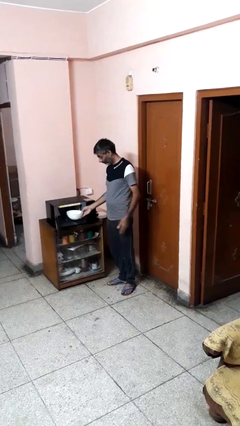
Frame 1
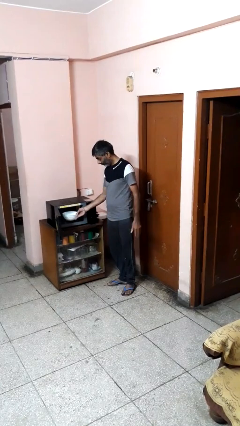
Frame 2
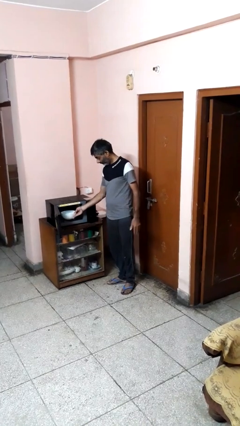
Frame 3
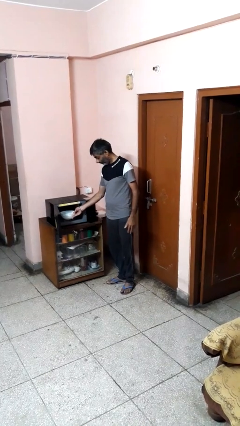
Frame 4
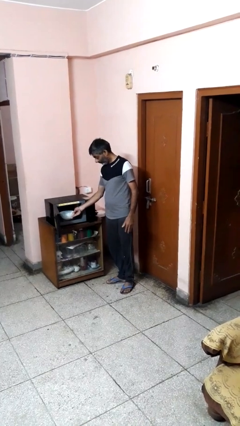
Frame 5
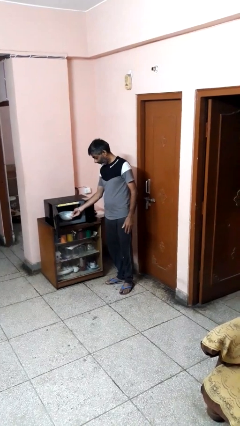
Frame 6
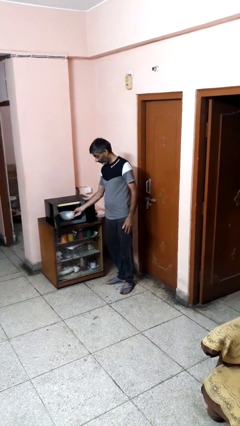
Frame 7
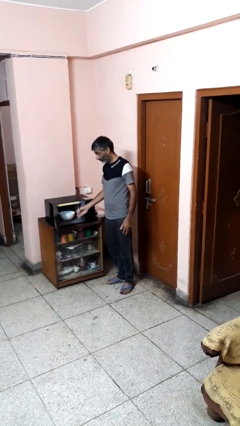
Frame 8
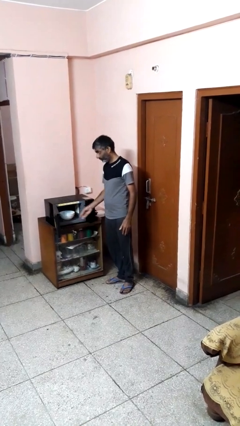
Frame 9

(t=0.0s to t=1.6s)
person puts object into microwave

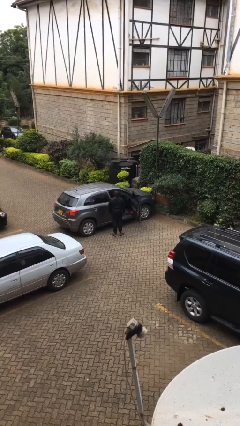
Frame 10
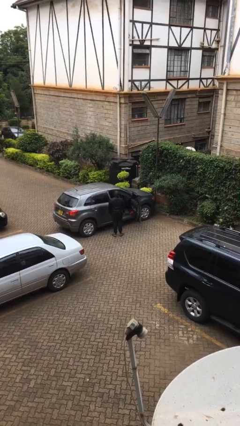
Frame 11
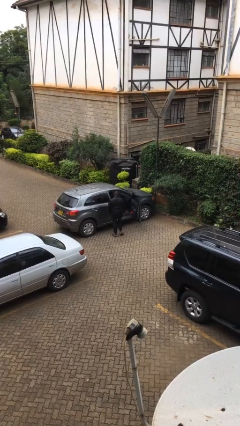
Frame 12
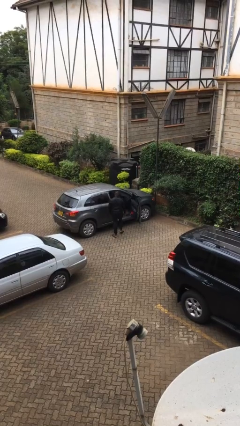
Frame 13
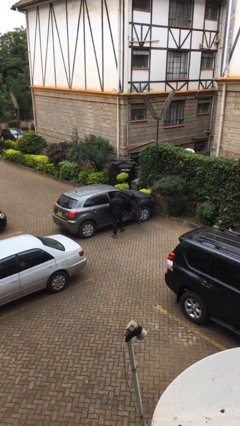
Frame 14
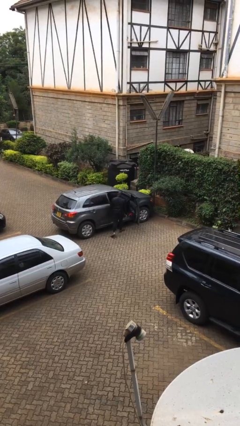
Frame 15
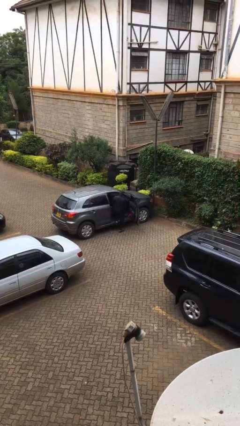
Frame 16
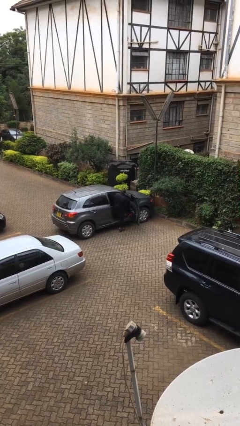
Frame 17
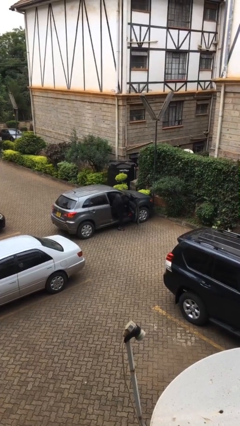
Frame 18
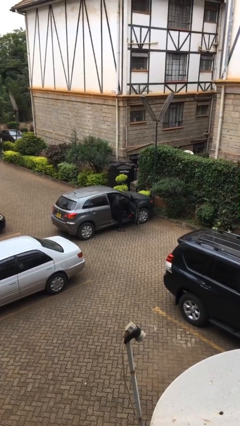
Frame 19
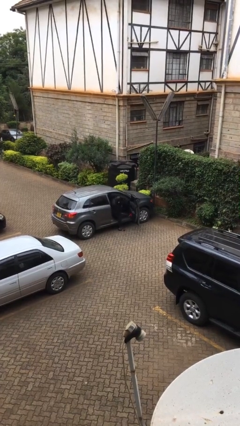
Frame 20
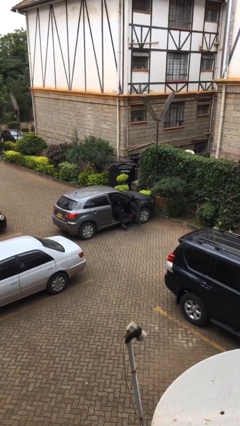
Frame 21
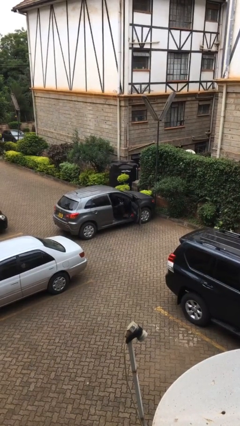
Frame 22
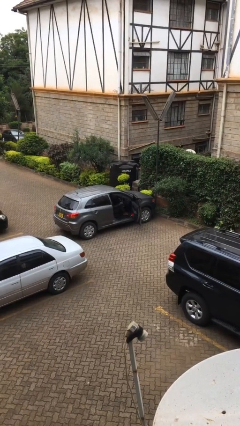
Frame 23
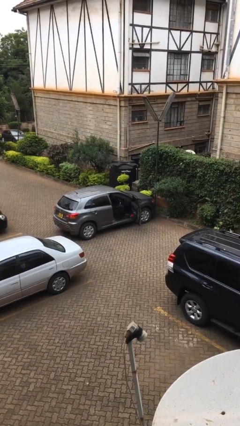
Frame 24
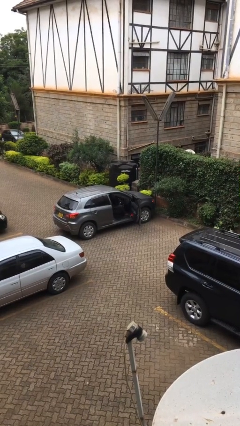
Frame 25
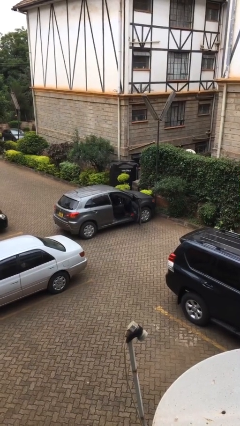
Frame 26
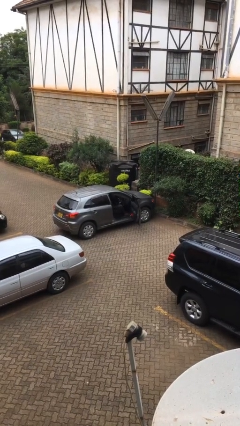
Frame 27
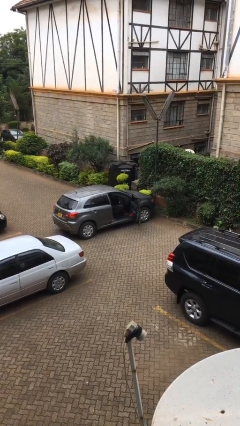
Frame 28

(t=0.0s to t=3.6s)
person enters car

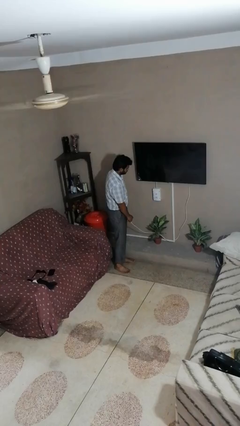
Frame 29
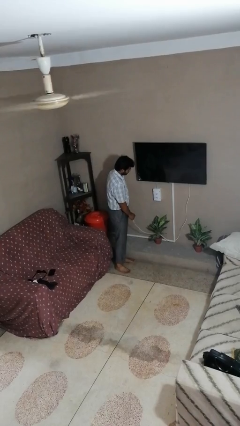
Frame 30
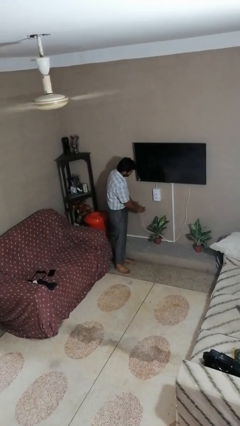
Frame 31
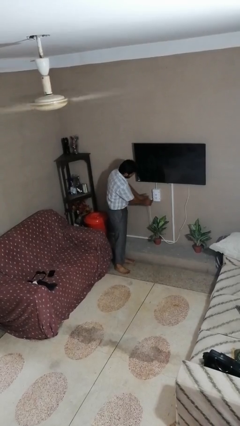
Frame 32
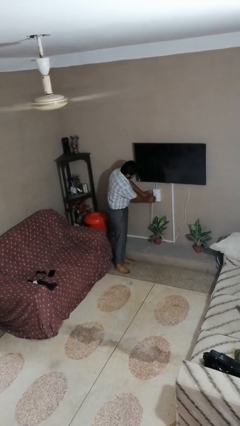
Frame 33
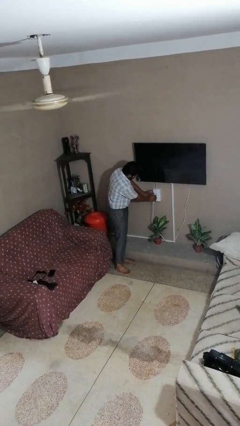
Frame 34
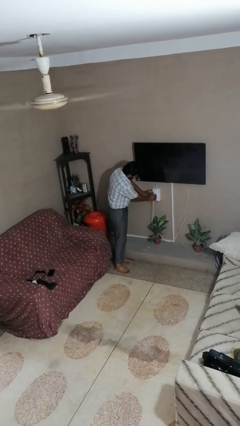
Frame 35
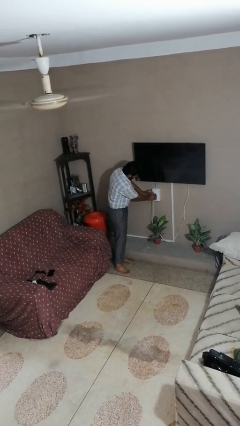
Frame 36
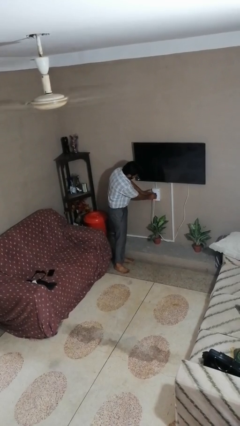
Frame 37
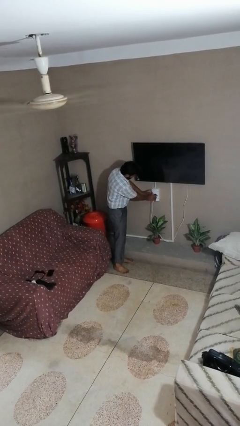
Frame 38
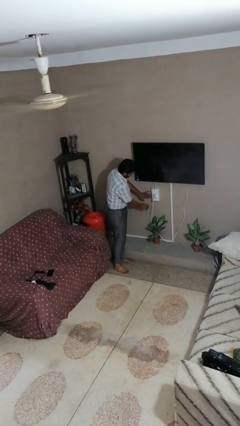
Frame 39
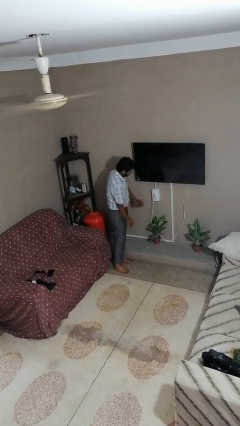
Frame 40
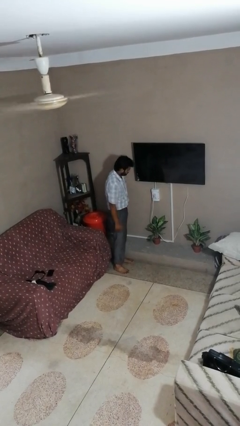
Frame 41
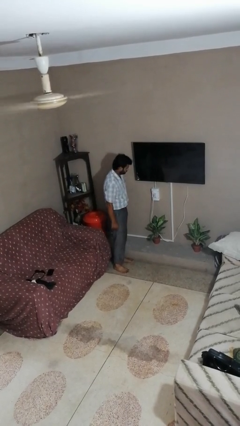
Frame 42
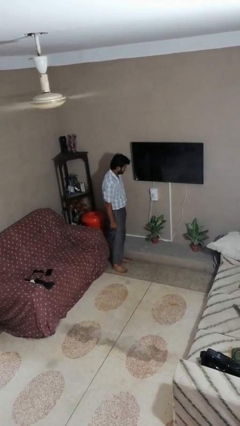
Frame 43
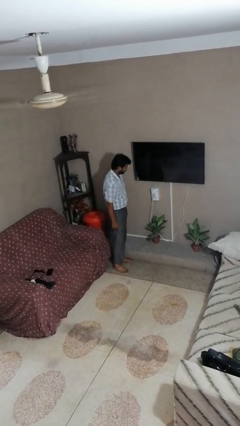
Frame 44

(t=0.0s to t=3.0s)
person plugs into electrical socket

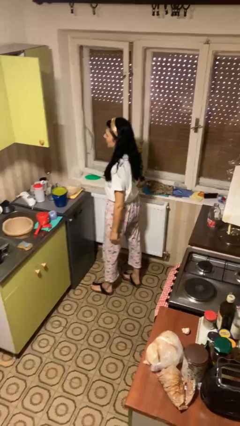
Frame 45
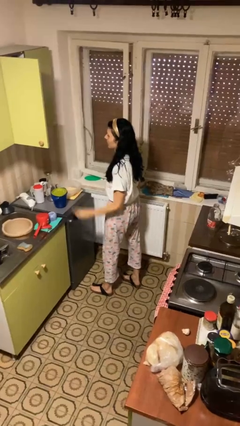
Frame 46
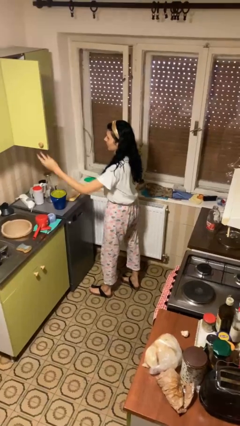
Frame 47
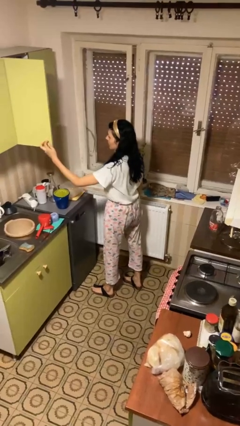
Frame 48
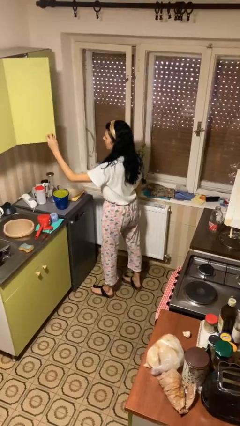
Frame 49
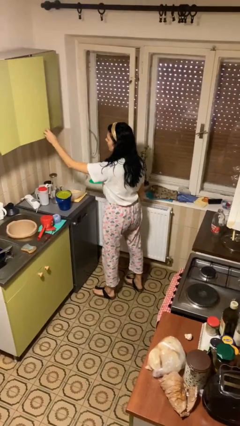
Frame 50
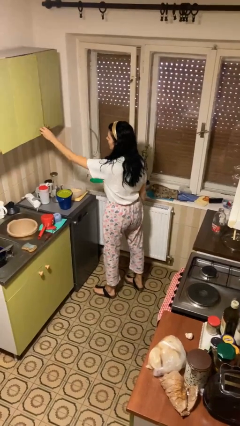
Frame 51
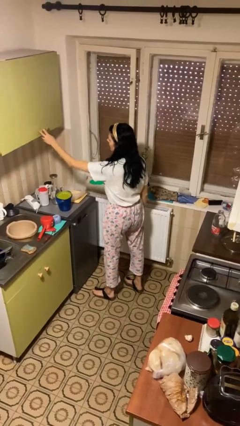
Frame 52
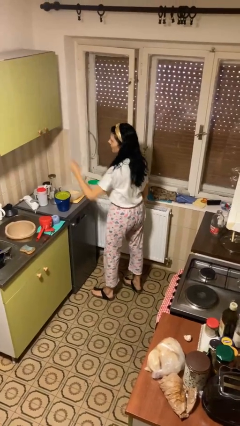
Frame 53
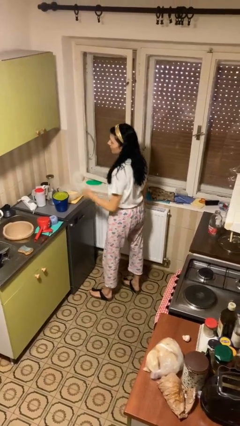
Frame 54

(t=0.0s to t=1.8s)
person closes cabinet

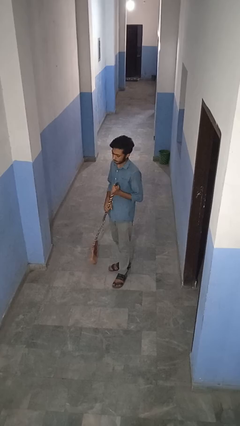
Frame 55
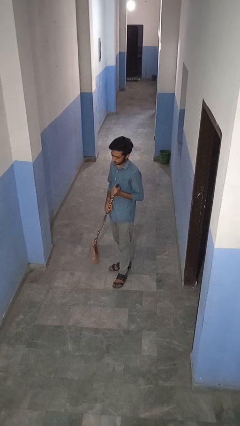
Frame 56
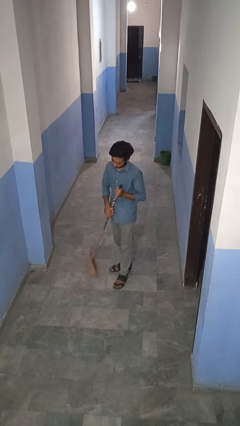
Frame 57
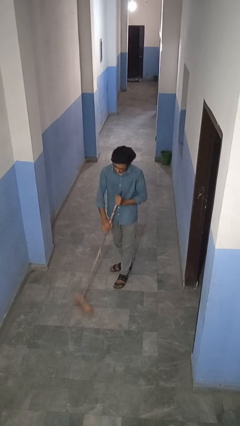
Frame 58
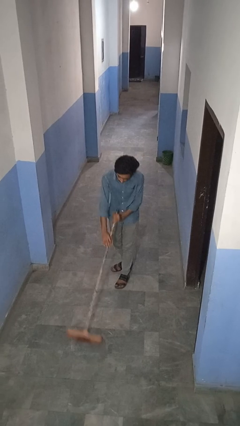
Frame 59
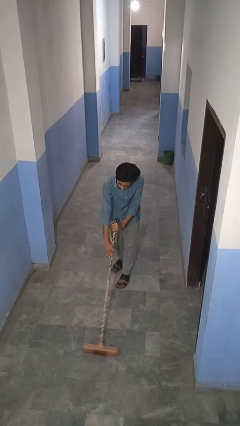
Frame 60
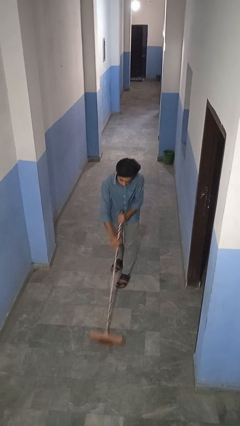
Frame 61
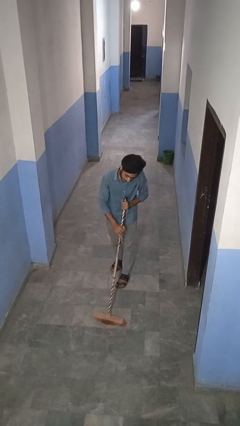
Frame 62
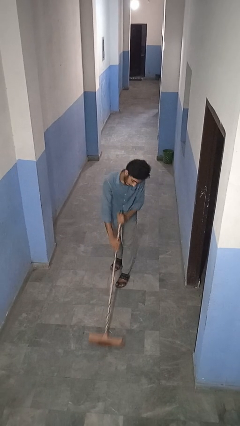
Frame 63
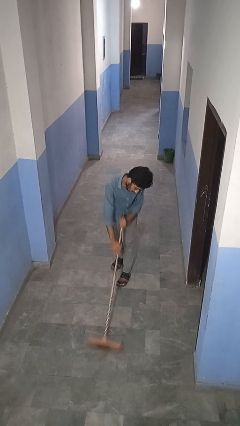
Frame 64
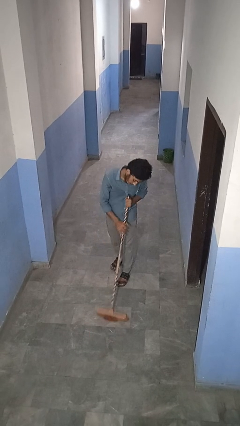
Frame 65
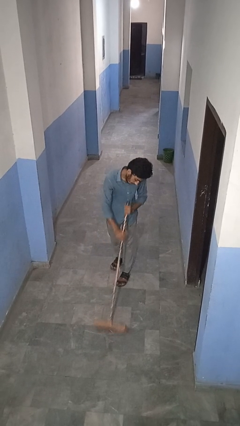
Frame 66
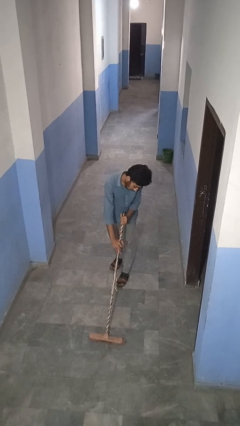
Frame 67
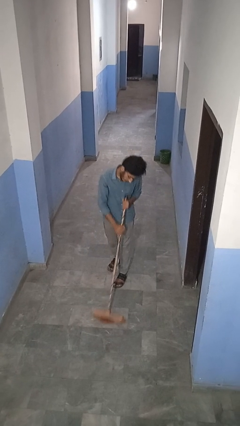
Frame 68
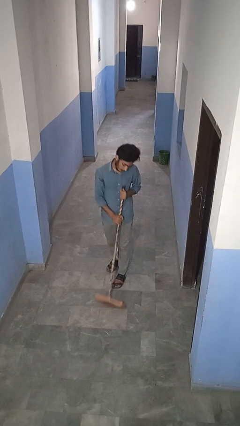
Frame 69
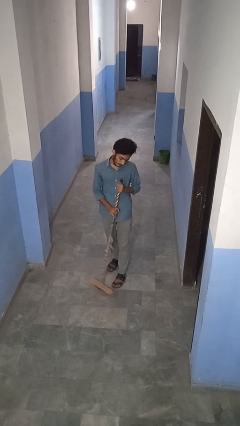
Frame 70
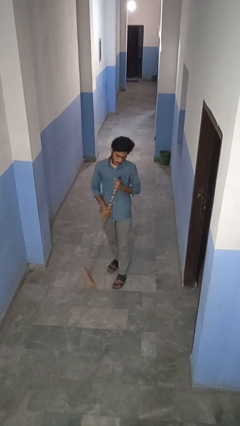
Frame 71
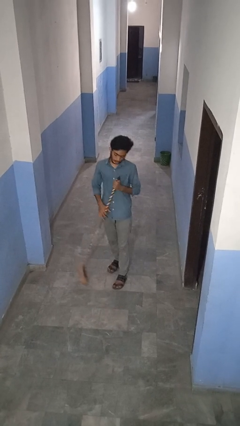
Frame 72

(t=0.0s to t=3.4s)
person sweeps floor

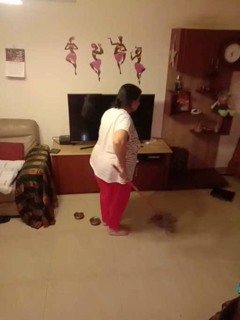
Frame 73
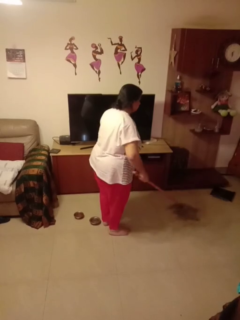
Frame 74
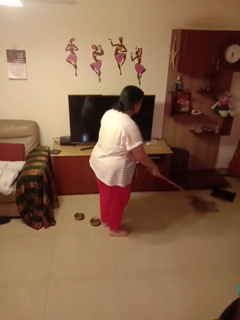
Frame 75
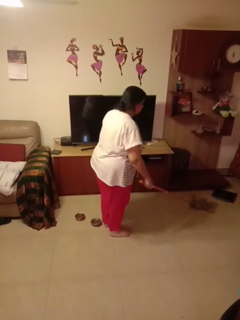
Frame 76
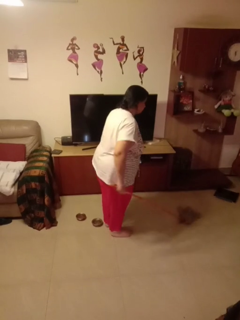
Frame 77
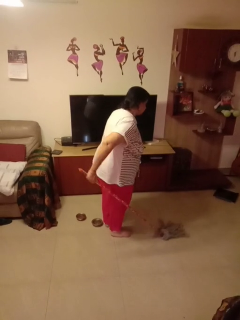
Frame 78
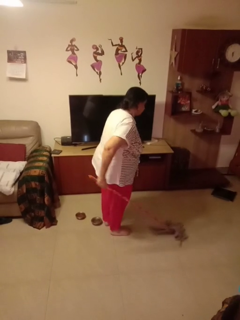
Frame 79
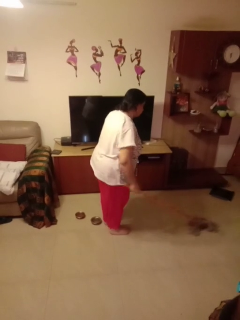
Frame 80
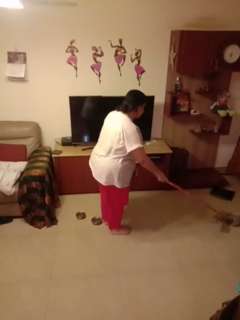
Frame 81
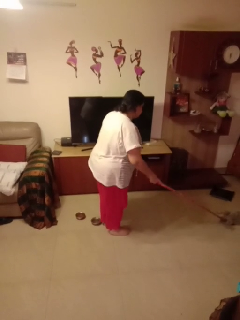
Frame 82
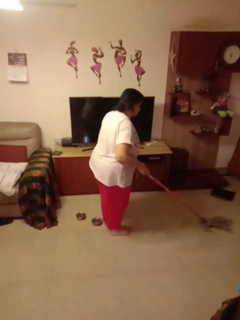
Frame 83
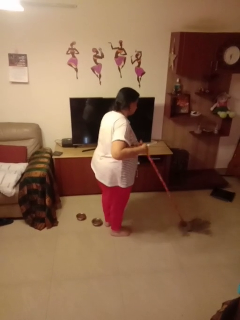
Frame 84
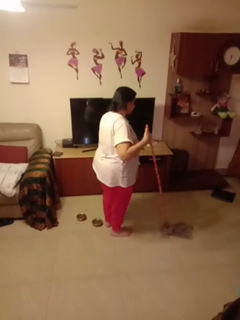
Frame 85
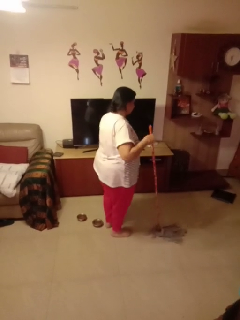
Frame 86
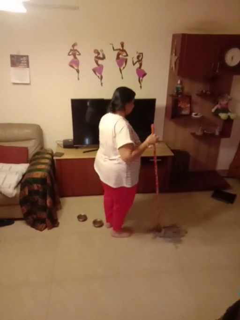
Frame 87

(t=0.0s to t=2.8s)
person mops

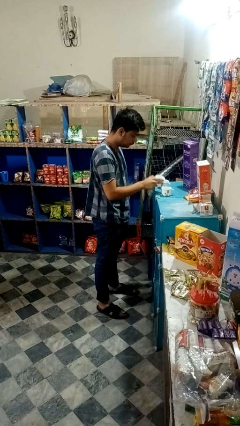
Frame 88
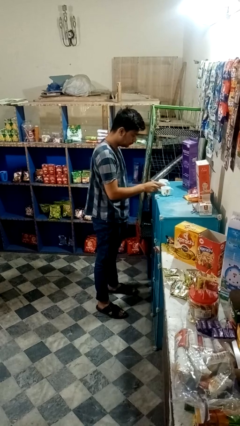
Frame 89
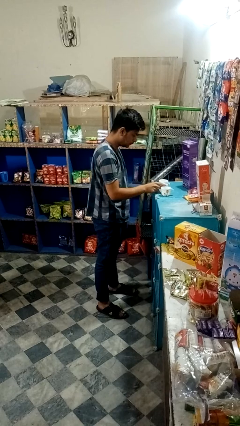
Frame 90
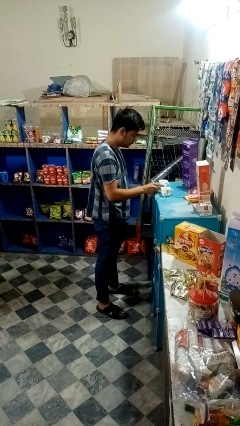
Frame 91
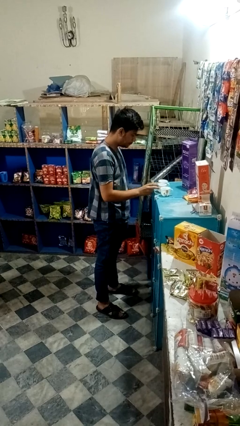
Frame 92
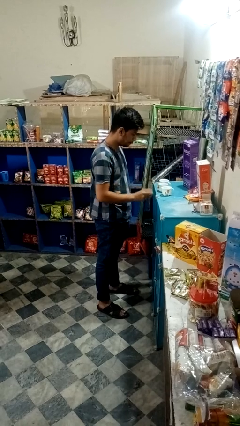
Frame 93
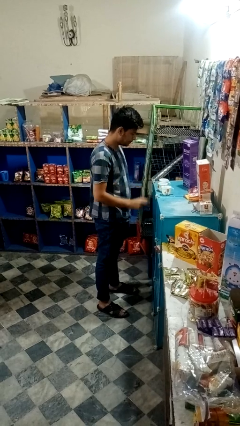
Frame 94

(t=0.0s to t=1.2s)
person puts down object on table

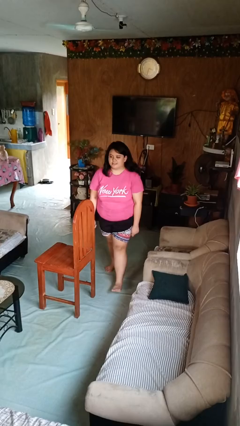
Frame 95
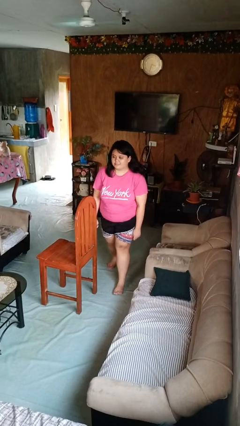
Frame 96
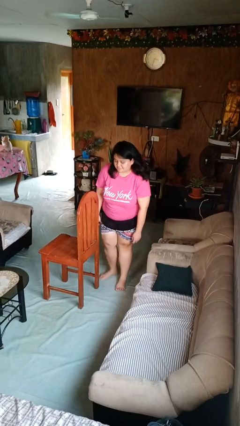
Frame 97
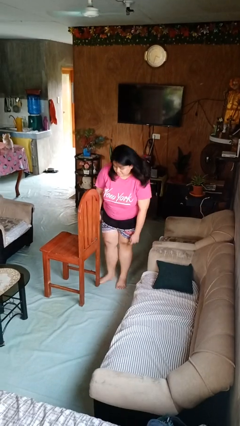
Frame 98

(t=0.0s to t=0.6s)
person stubs toe
